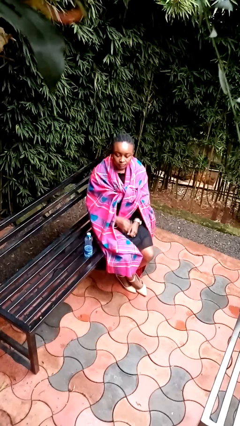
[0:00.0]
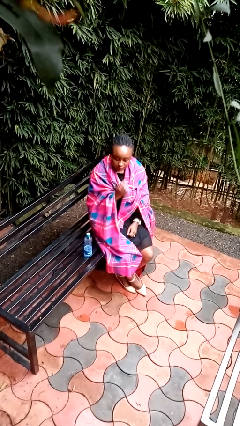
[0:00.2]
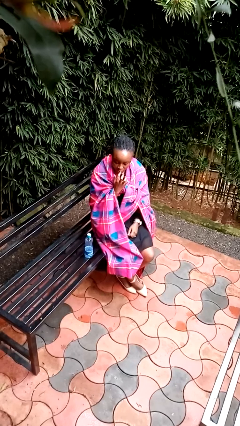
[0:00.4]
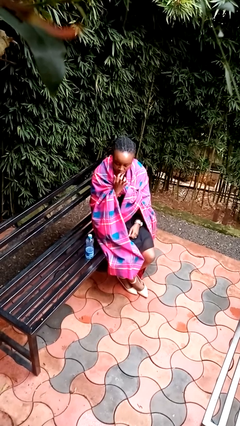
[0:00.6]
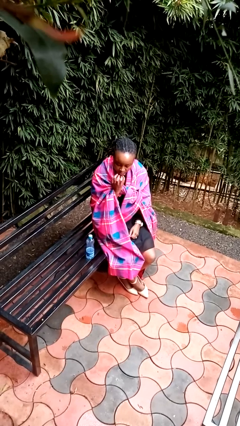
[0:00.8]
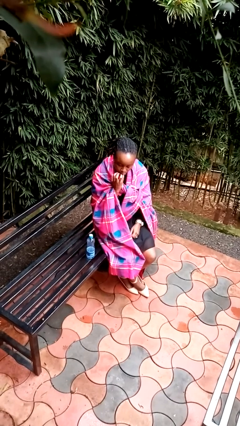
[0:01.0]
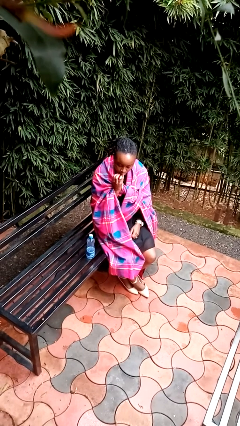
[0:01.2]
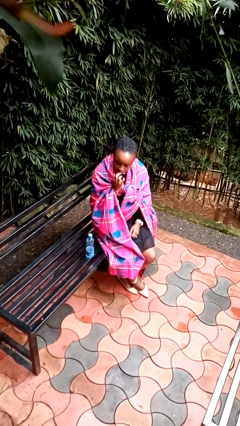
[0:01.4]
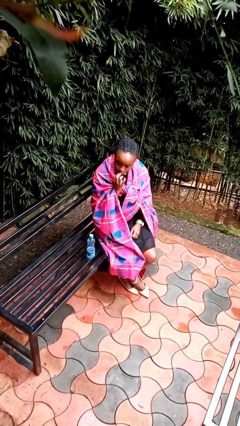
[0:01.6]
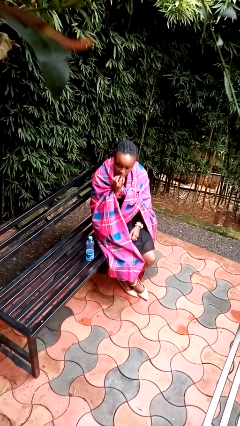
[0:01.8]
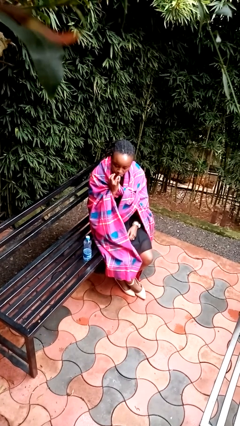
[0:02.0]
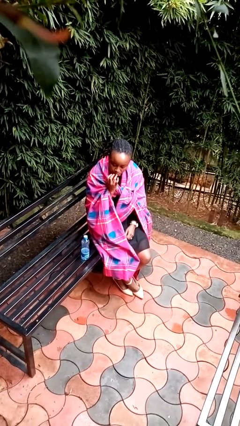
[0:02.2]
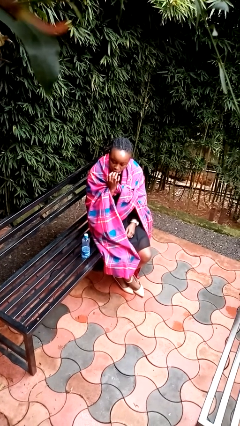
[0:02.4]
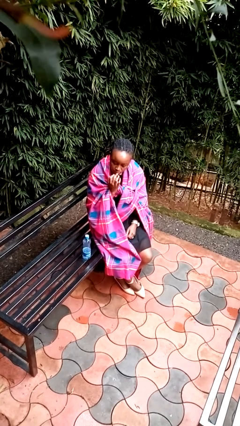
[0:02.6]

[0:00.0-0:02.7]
person licks fingers

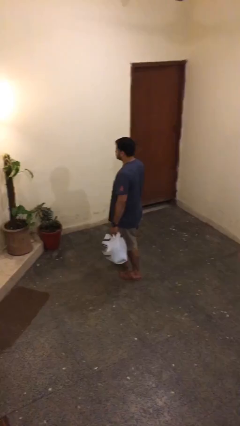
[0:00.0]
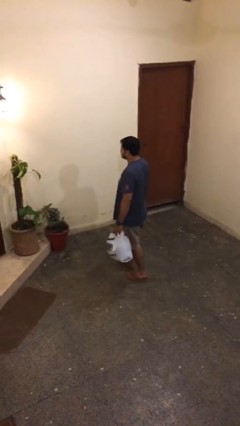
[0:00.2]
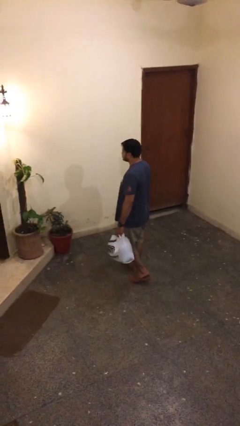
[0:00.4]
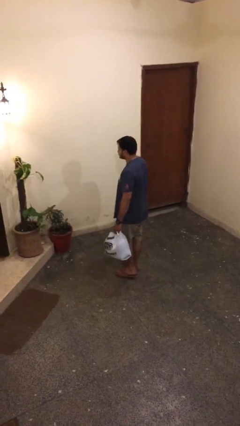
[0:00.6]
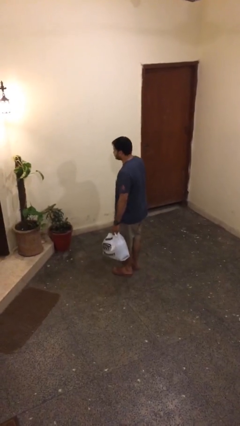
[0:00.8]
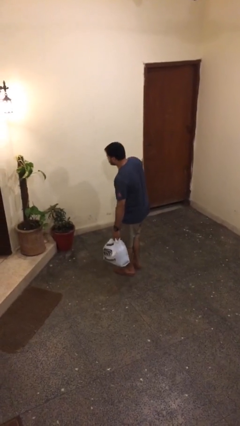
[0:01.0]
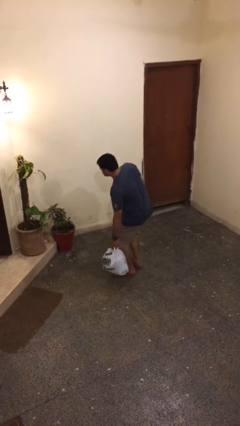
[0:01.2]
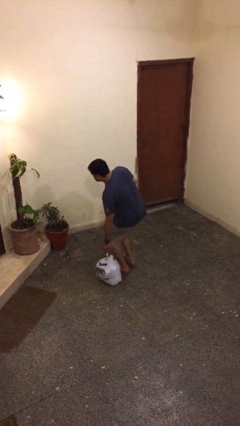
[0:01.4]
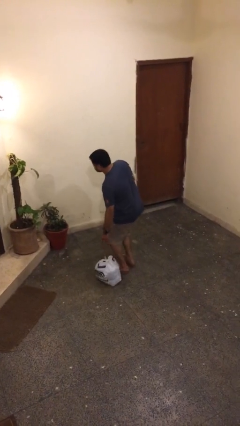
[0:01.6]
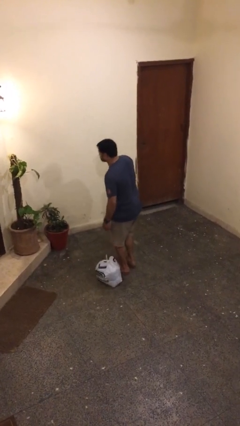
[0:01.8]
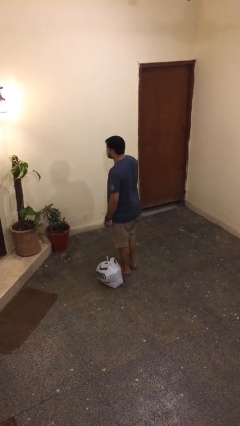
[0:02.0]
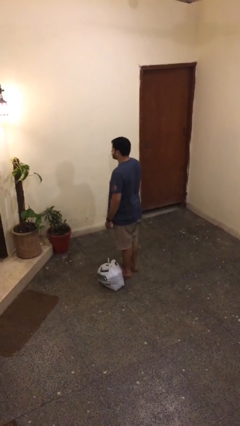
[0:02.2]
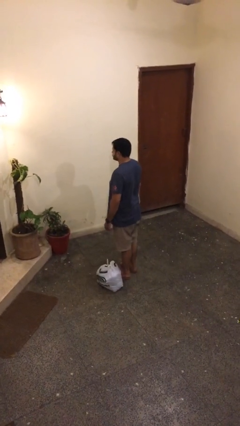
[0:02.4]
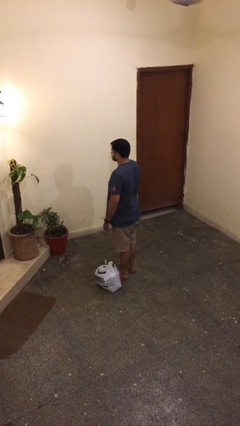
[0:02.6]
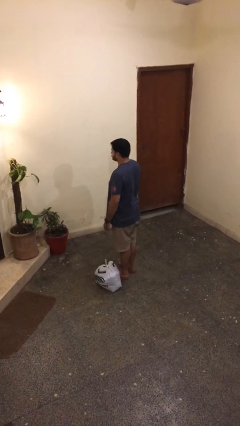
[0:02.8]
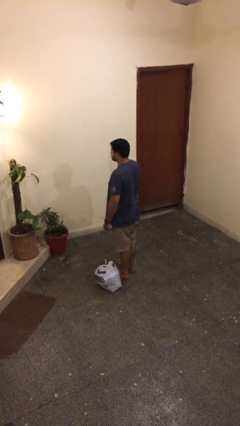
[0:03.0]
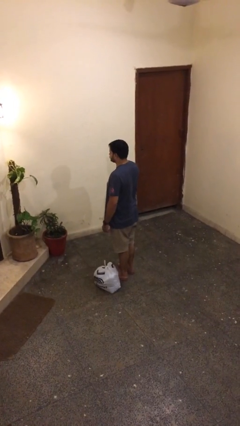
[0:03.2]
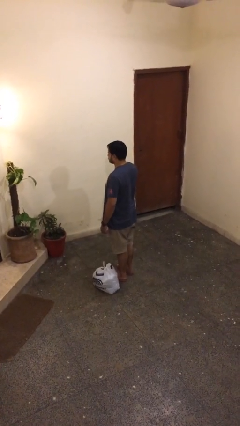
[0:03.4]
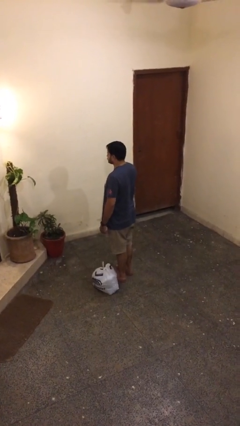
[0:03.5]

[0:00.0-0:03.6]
person puts down object on floor

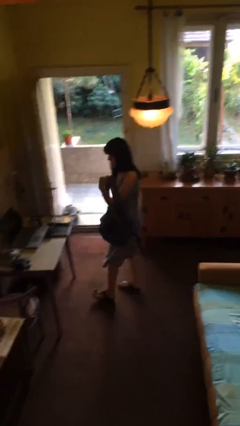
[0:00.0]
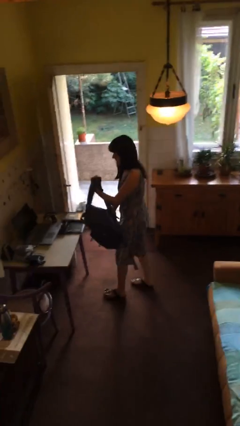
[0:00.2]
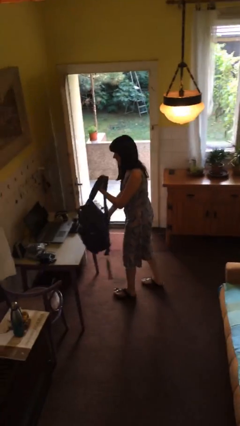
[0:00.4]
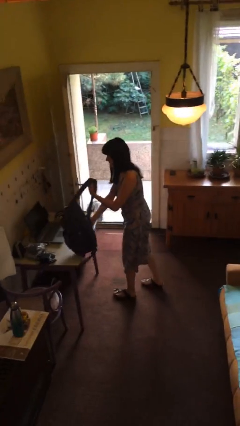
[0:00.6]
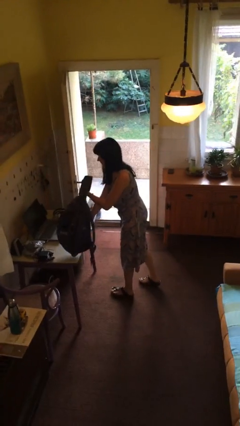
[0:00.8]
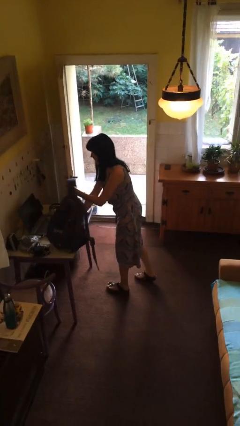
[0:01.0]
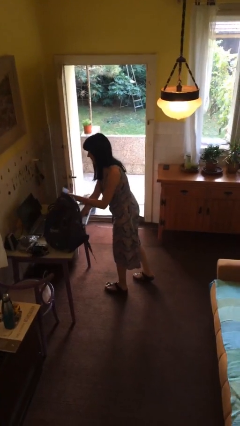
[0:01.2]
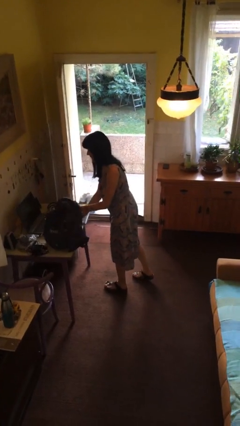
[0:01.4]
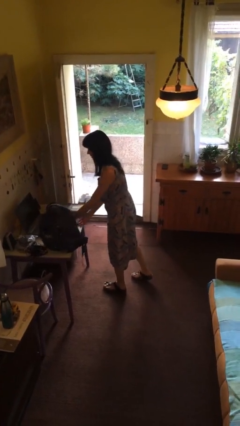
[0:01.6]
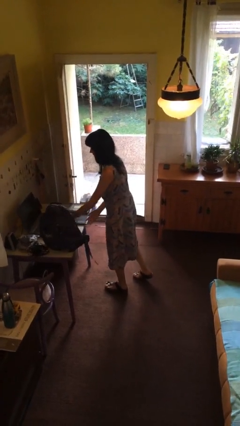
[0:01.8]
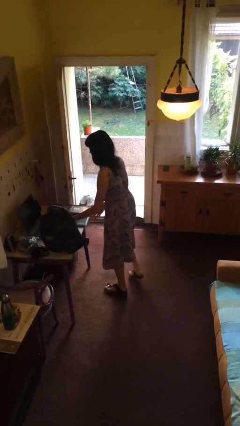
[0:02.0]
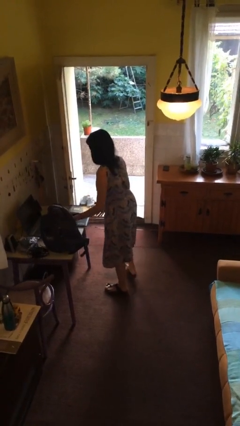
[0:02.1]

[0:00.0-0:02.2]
person puts down object on table

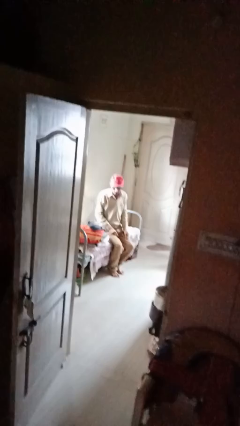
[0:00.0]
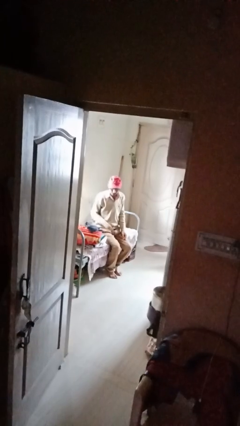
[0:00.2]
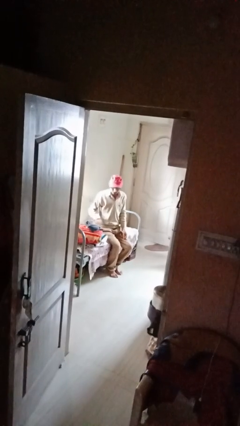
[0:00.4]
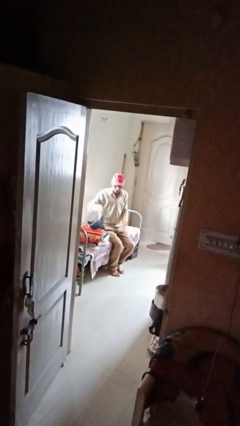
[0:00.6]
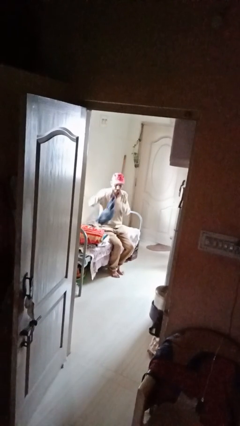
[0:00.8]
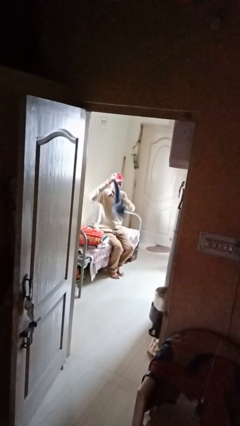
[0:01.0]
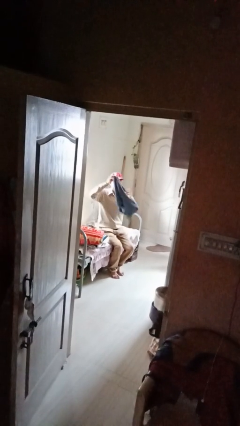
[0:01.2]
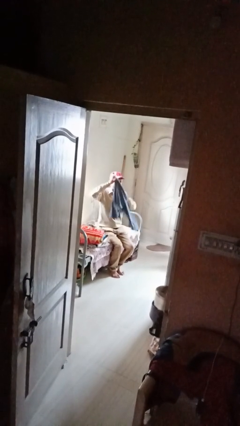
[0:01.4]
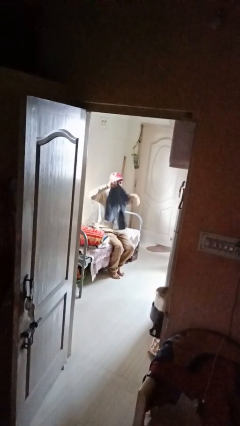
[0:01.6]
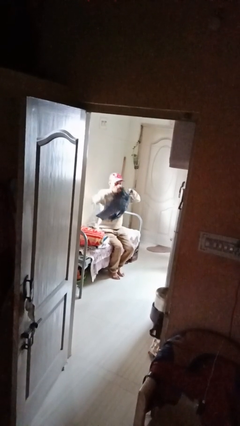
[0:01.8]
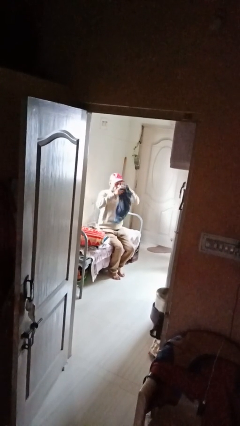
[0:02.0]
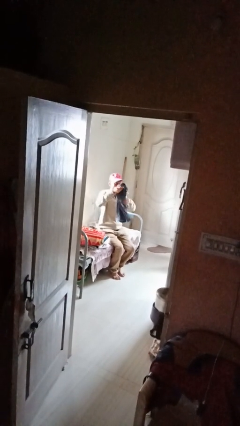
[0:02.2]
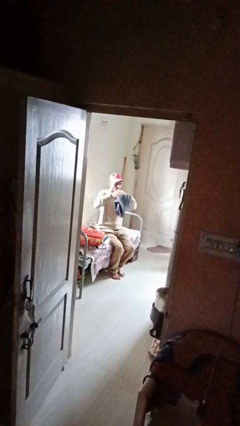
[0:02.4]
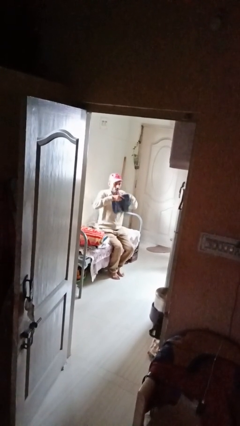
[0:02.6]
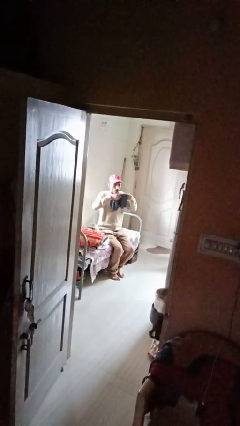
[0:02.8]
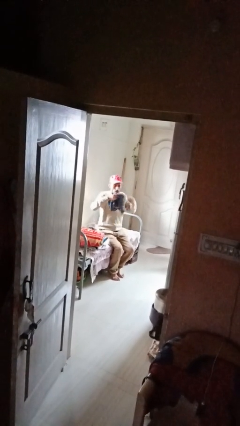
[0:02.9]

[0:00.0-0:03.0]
person folds pants

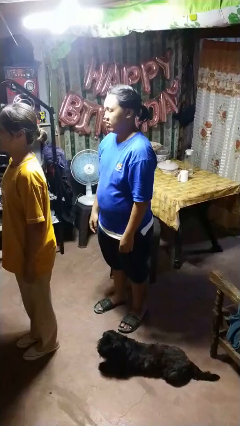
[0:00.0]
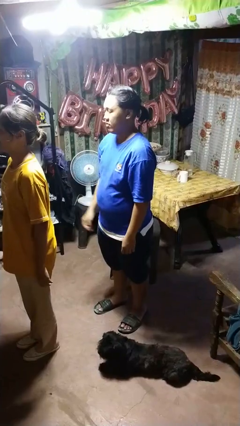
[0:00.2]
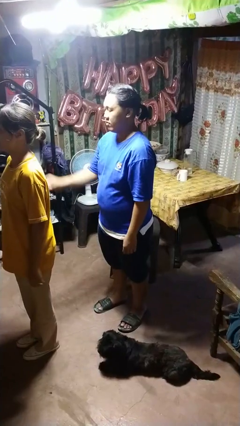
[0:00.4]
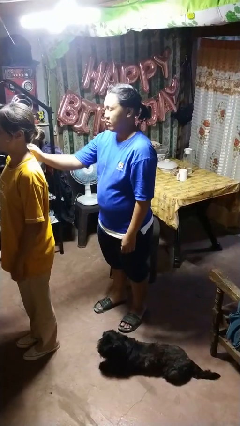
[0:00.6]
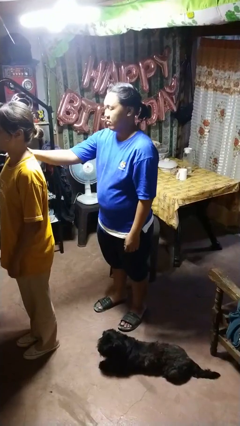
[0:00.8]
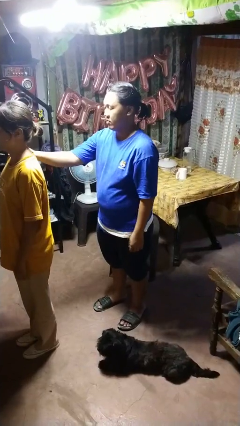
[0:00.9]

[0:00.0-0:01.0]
person grabs person by shoulder

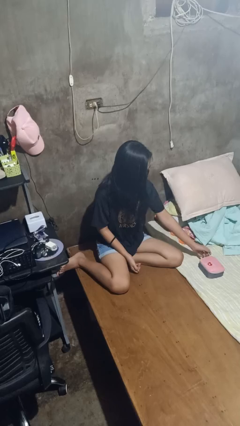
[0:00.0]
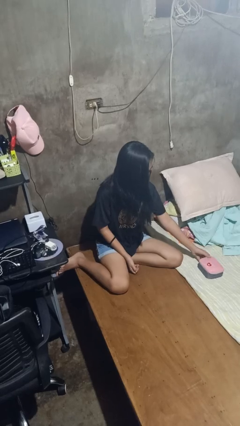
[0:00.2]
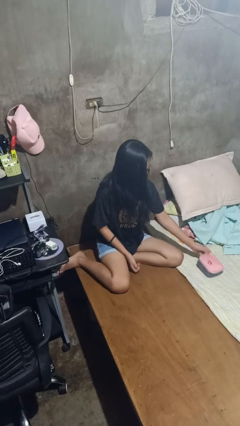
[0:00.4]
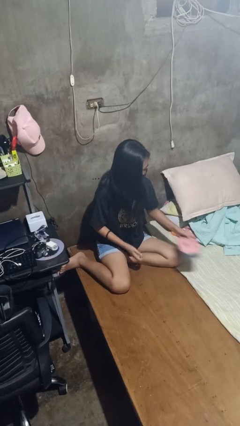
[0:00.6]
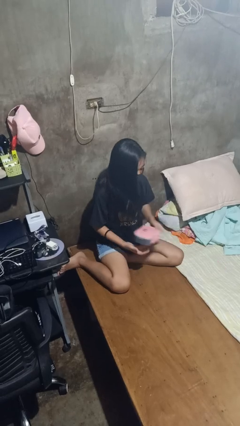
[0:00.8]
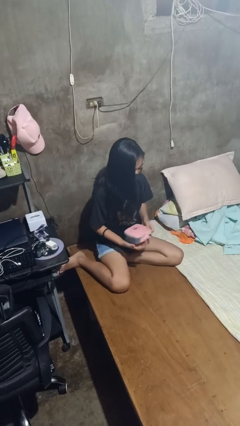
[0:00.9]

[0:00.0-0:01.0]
person picks up object from bed

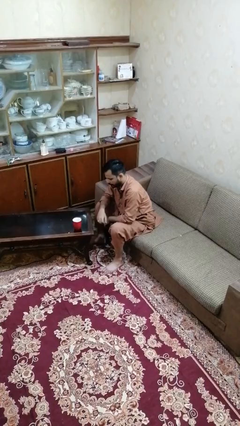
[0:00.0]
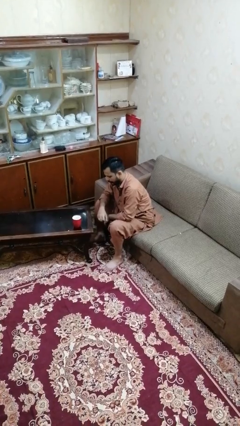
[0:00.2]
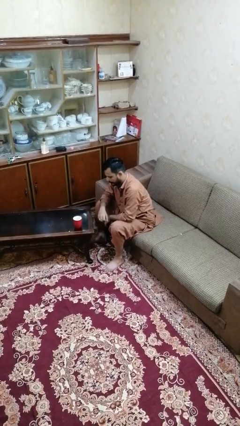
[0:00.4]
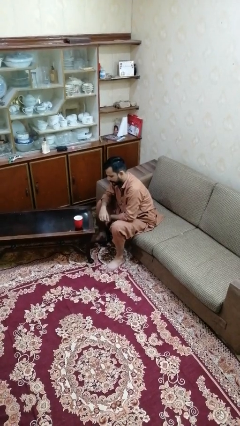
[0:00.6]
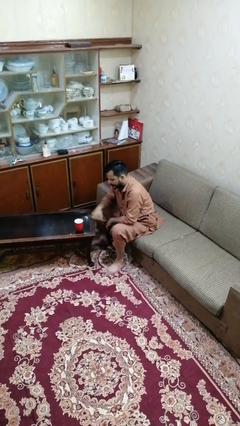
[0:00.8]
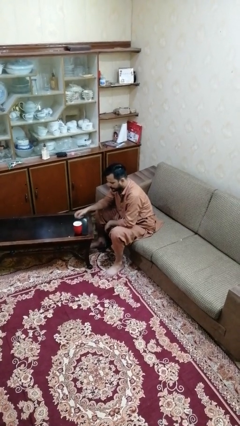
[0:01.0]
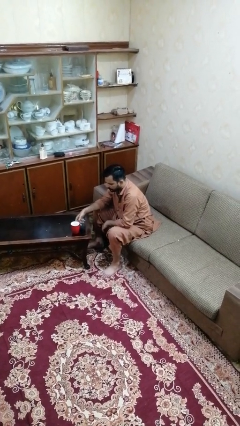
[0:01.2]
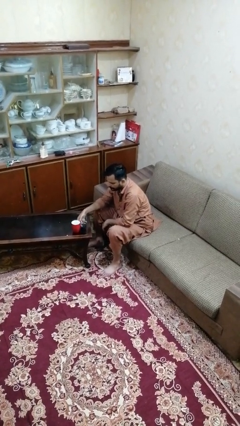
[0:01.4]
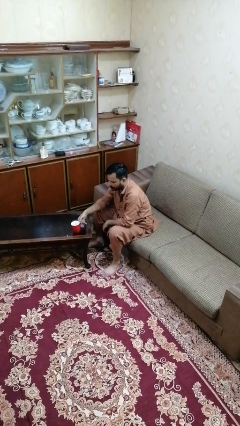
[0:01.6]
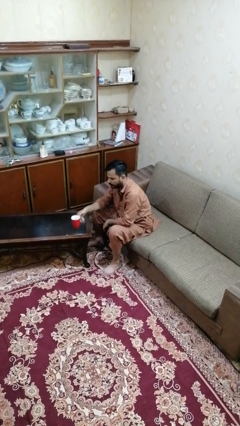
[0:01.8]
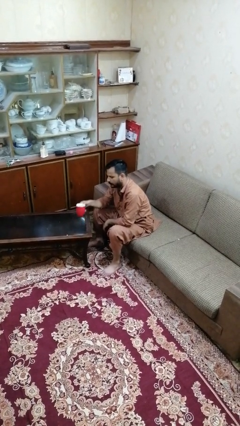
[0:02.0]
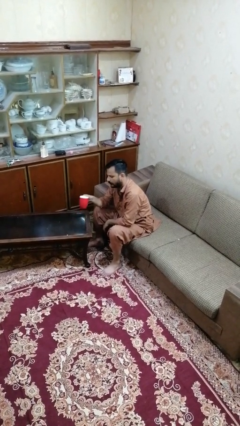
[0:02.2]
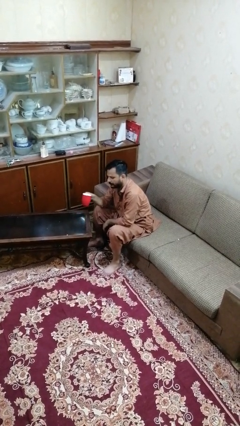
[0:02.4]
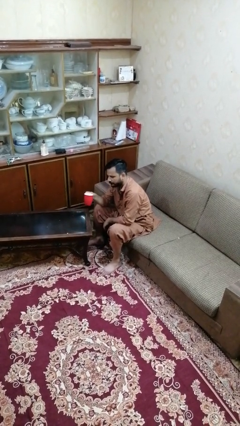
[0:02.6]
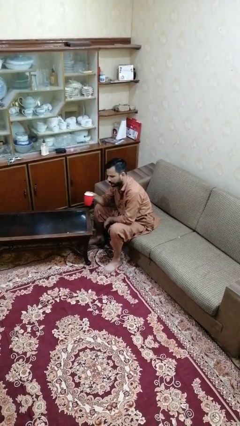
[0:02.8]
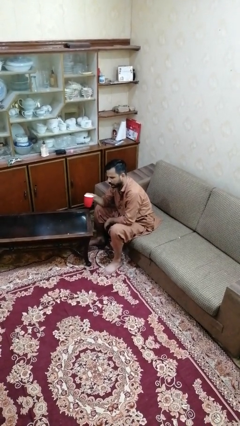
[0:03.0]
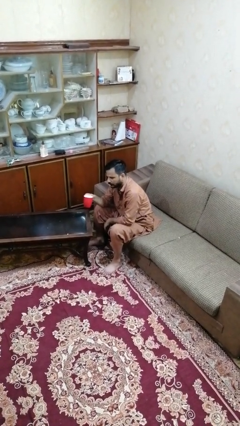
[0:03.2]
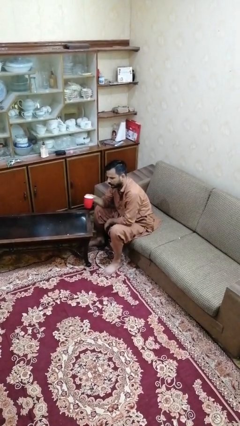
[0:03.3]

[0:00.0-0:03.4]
person picks up object from table

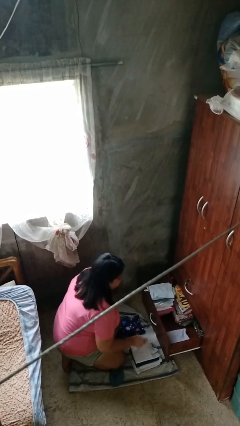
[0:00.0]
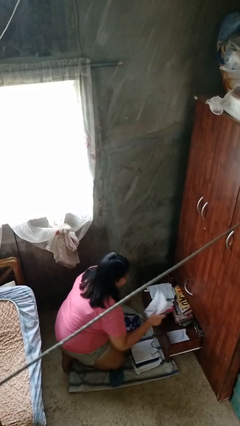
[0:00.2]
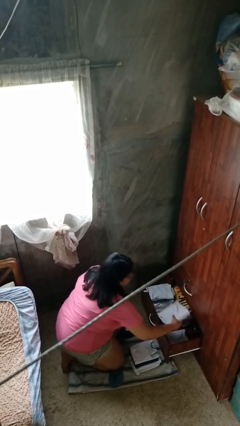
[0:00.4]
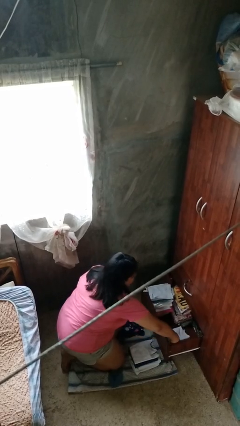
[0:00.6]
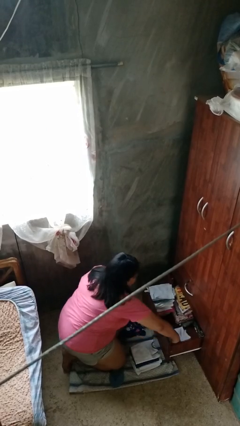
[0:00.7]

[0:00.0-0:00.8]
person puts clothes into dresser
